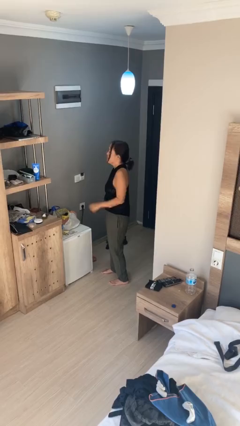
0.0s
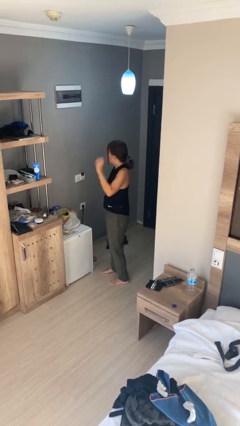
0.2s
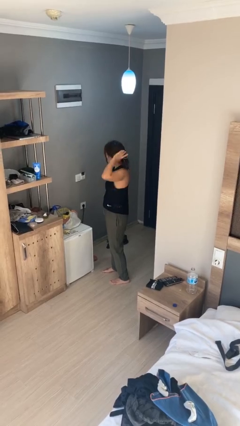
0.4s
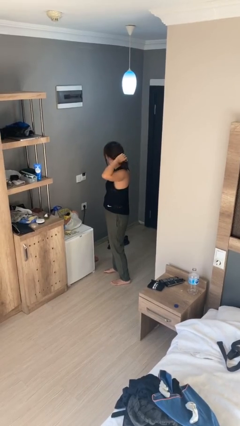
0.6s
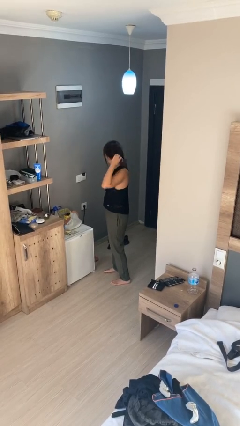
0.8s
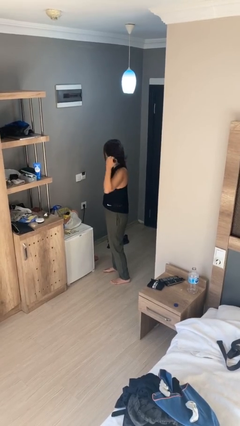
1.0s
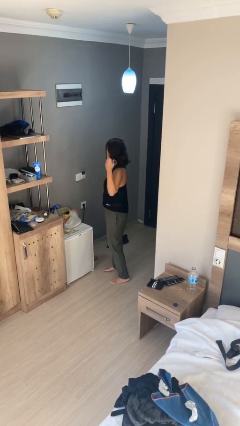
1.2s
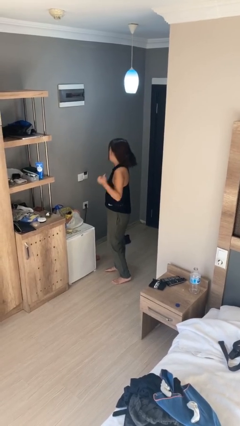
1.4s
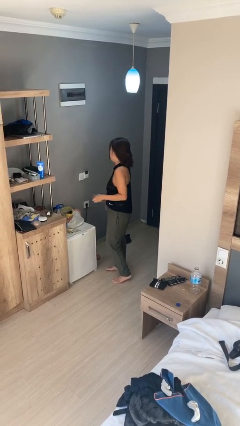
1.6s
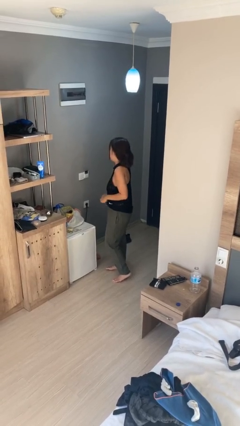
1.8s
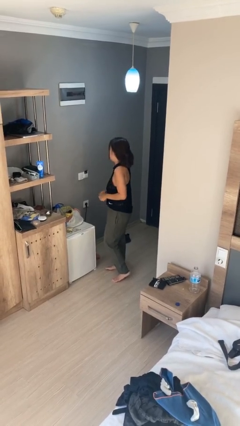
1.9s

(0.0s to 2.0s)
person takes off hairtie

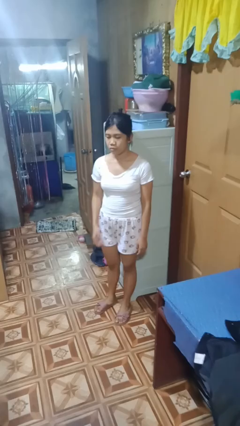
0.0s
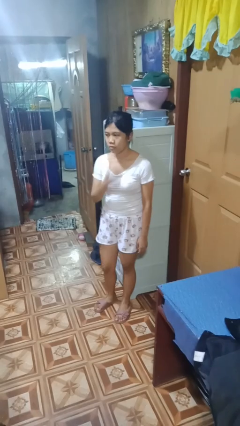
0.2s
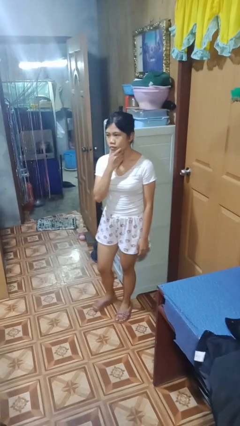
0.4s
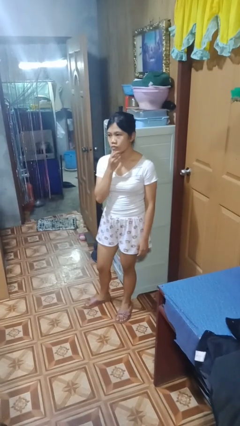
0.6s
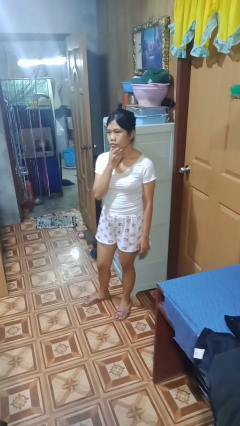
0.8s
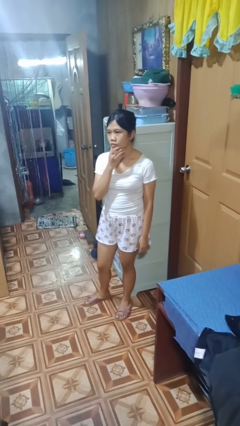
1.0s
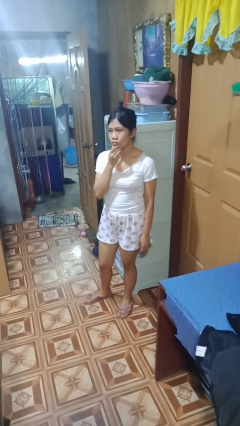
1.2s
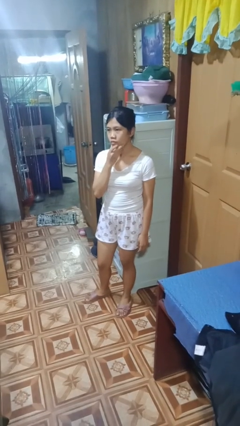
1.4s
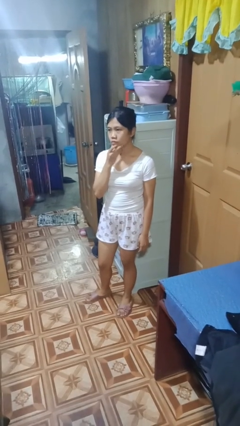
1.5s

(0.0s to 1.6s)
person strokes chin

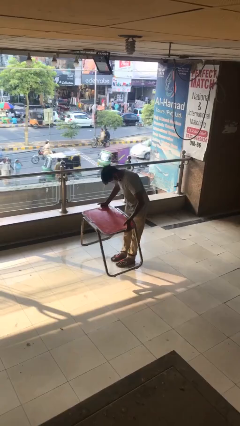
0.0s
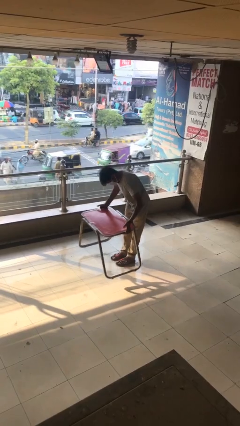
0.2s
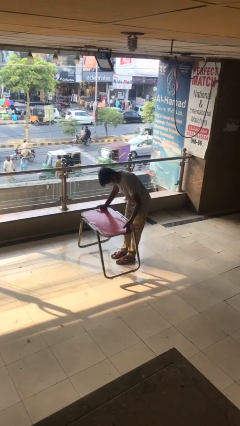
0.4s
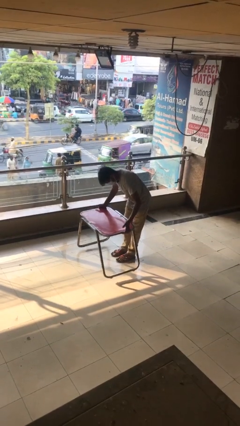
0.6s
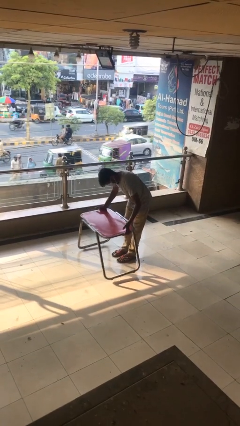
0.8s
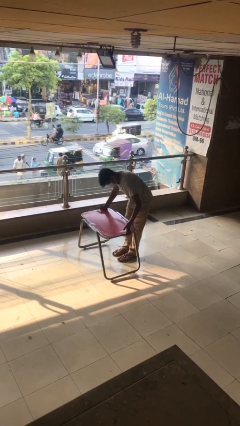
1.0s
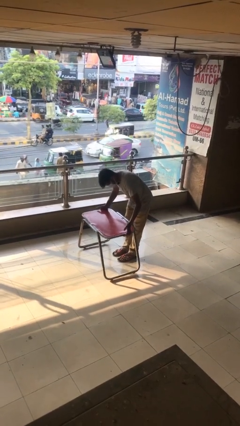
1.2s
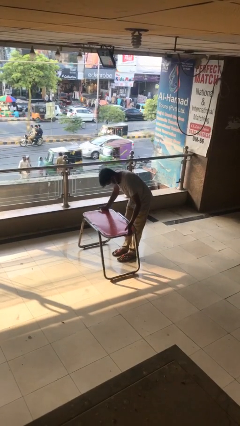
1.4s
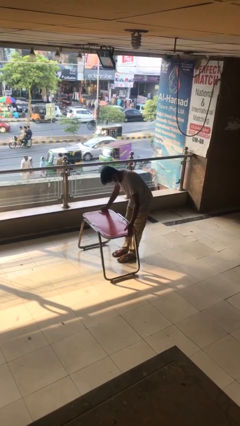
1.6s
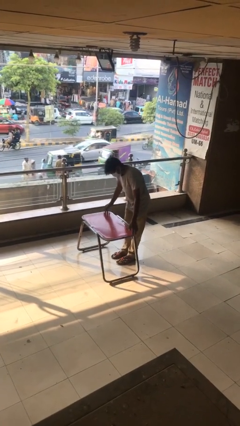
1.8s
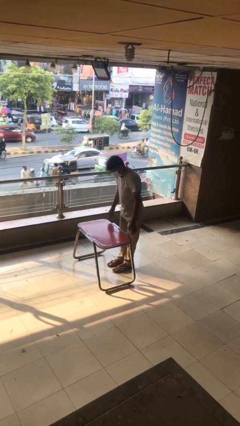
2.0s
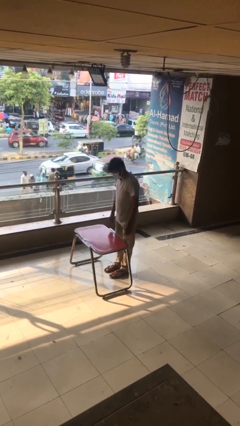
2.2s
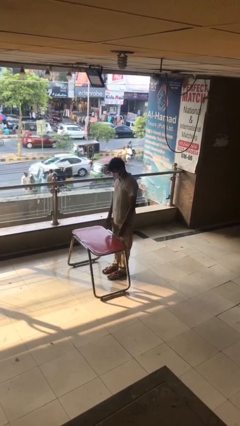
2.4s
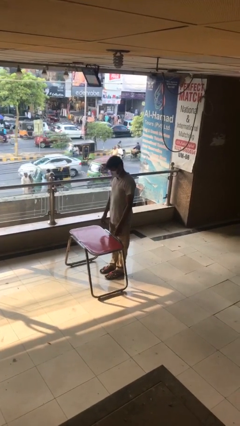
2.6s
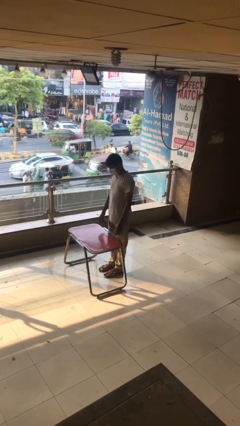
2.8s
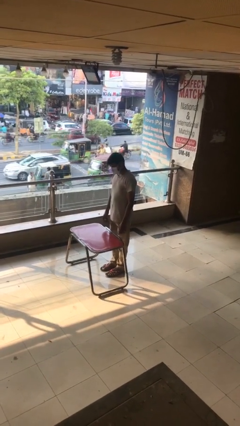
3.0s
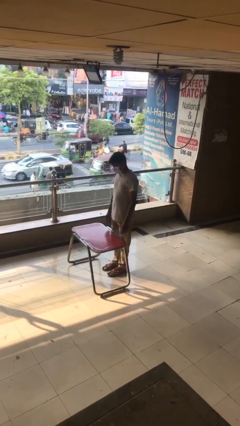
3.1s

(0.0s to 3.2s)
person puts down object on floor

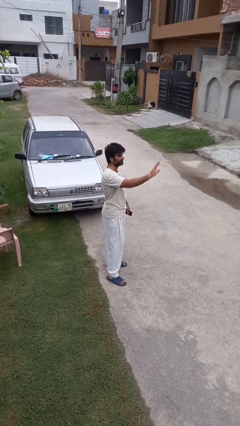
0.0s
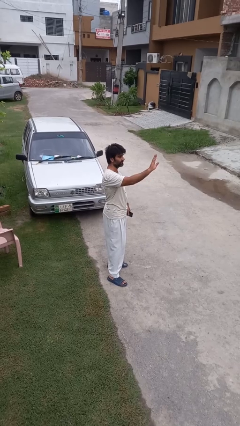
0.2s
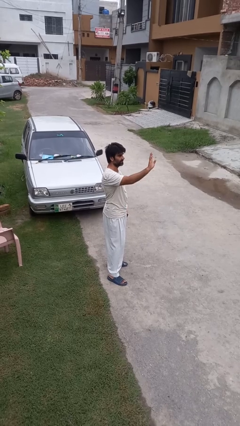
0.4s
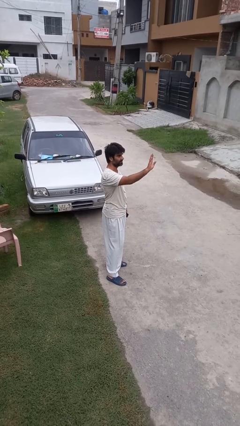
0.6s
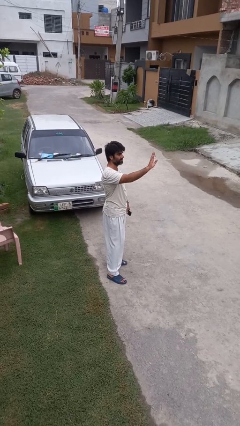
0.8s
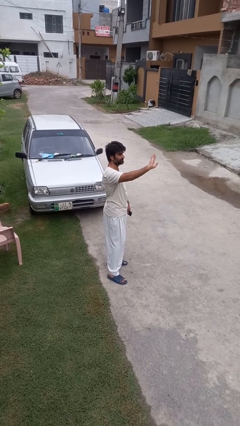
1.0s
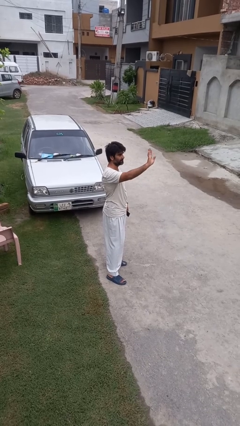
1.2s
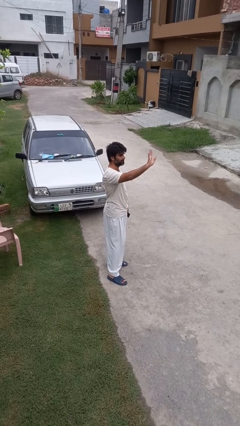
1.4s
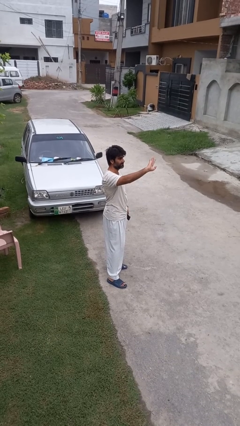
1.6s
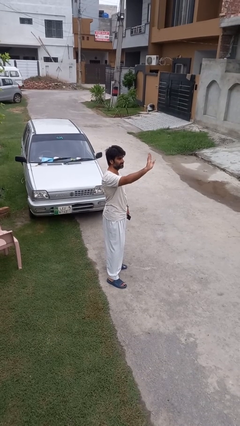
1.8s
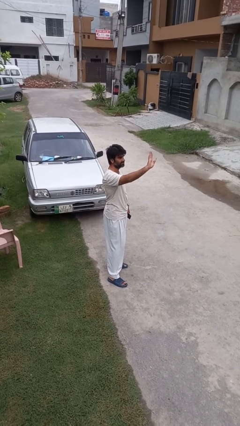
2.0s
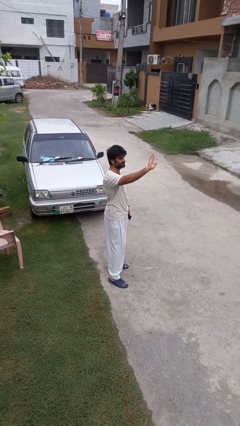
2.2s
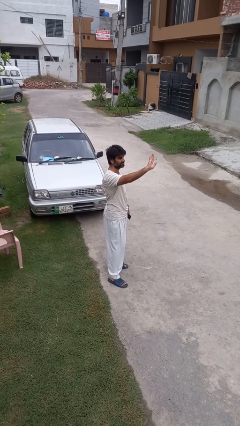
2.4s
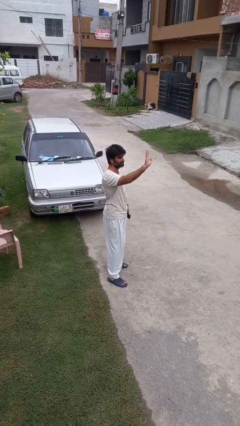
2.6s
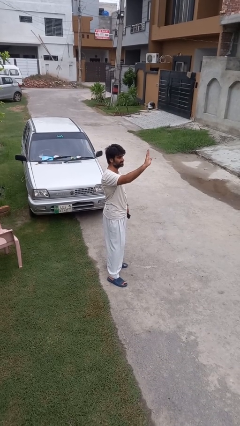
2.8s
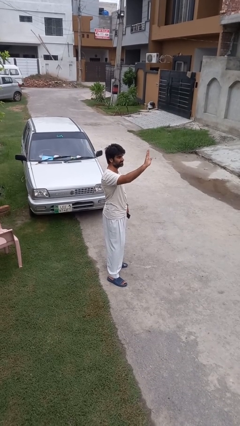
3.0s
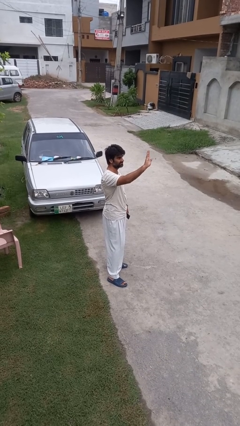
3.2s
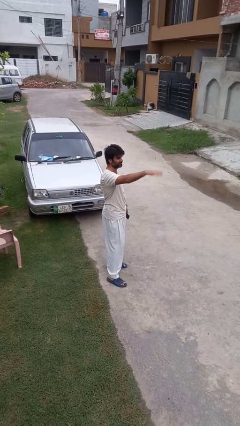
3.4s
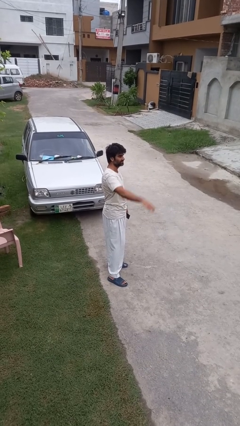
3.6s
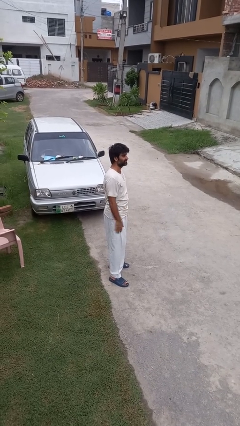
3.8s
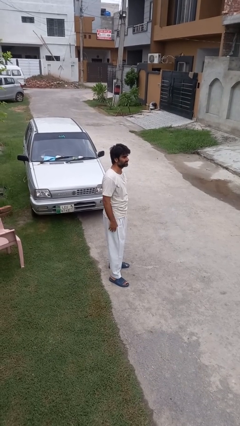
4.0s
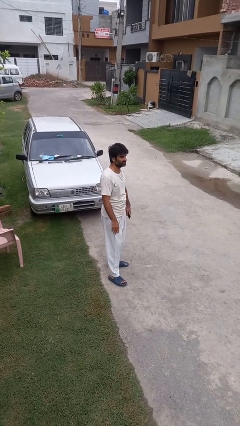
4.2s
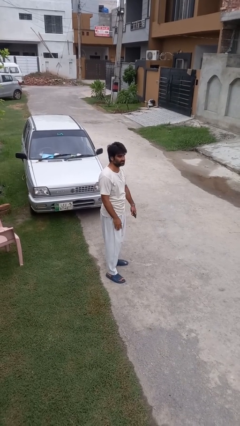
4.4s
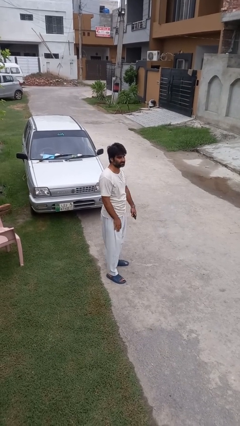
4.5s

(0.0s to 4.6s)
person waves at person

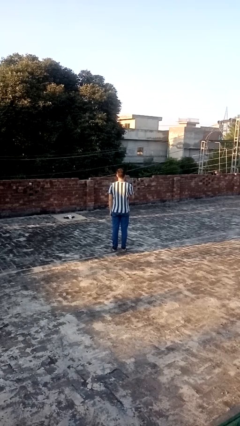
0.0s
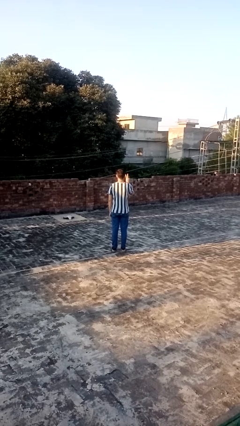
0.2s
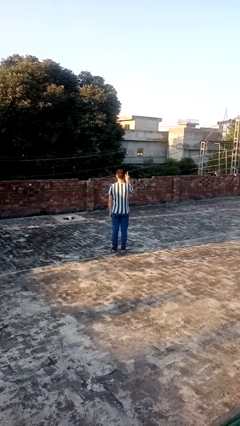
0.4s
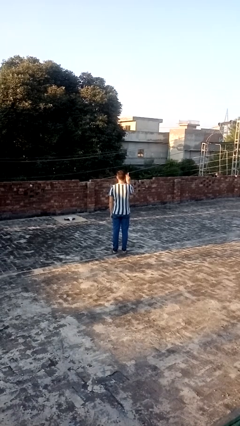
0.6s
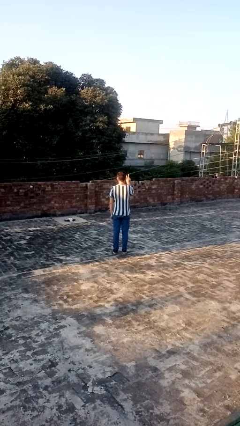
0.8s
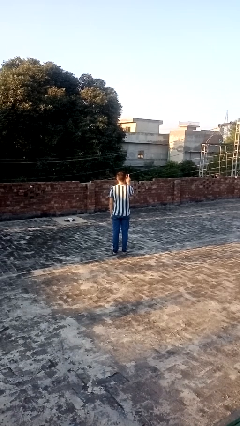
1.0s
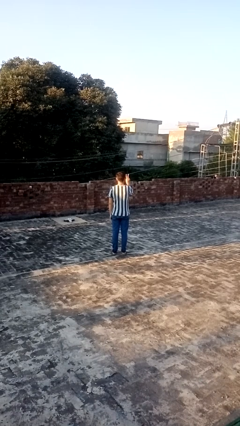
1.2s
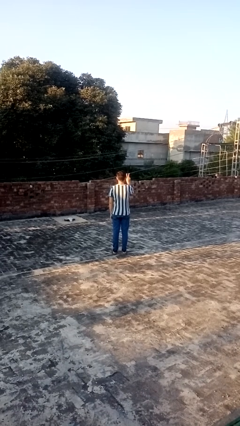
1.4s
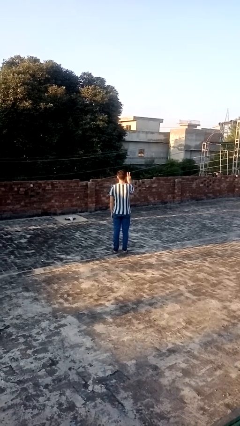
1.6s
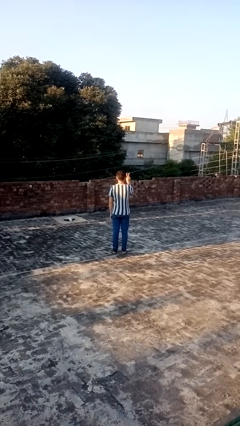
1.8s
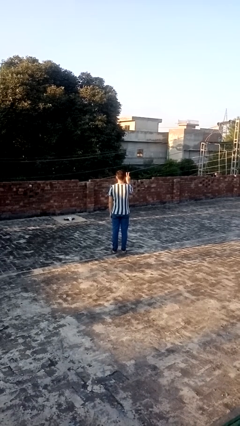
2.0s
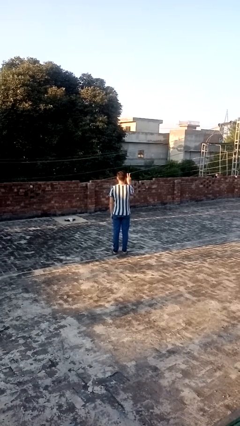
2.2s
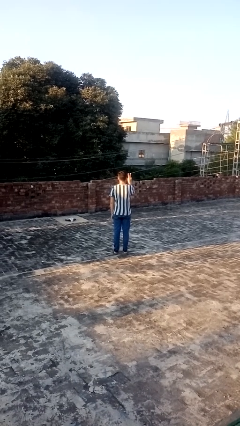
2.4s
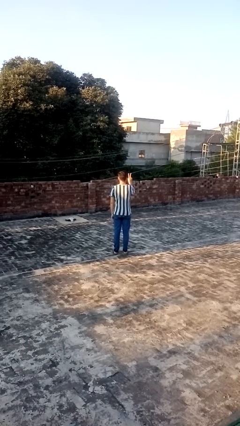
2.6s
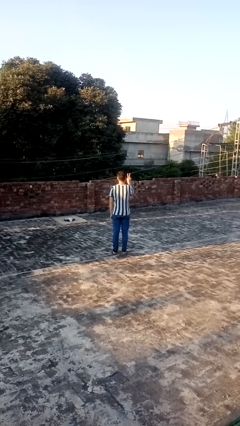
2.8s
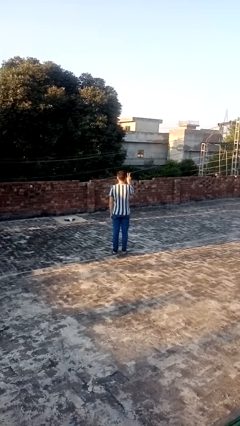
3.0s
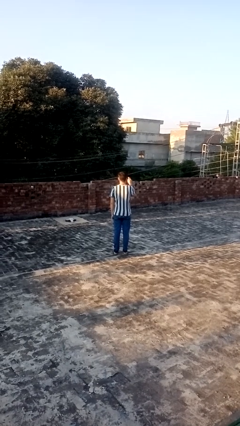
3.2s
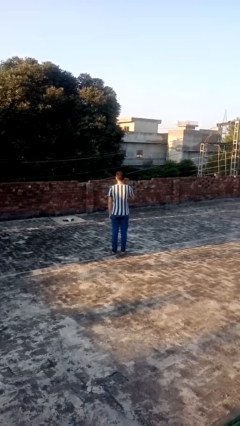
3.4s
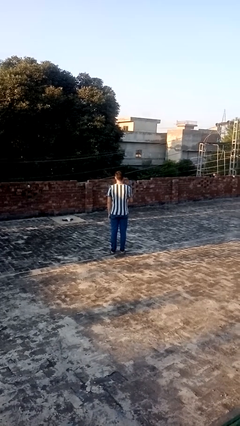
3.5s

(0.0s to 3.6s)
person gestures peace

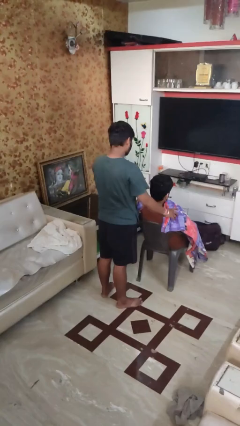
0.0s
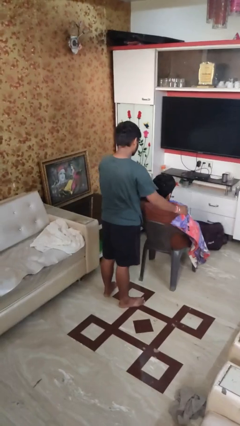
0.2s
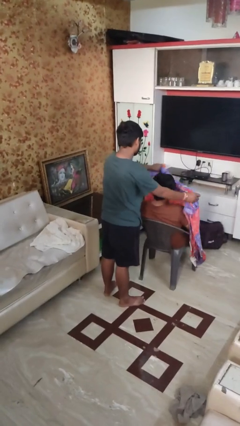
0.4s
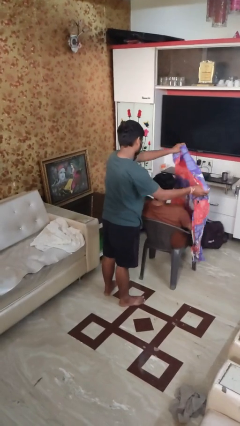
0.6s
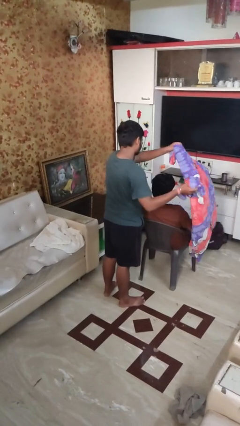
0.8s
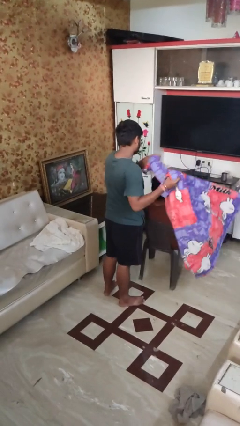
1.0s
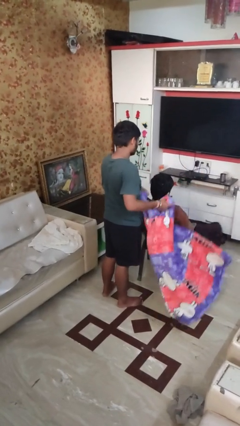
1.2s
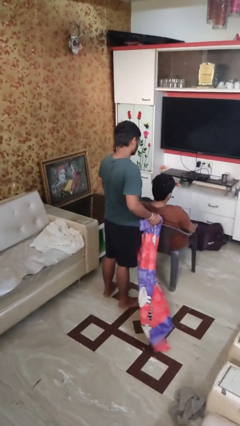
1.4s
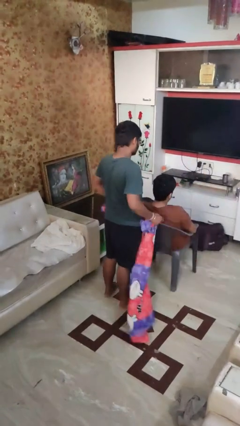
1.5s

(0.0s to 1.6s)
person uncovers friend with blanket

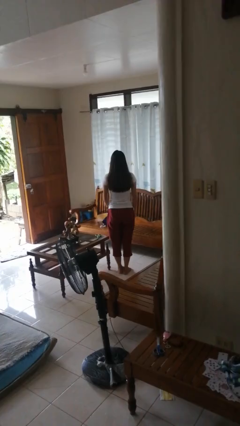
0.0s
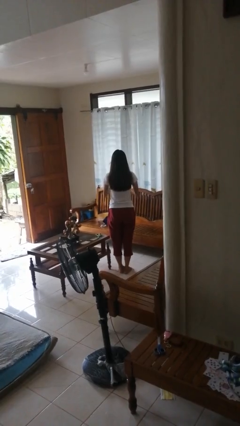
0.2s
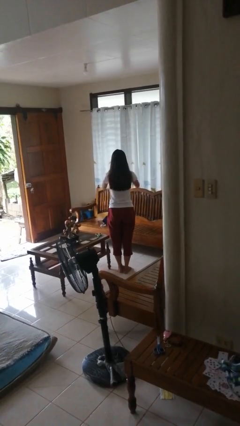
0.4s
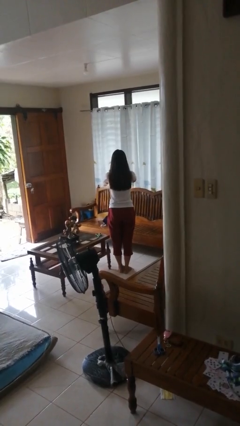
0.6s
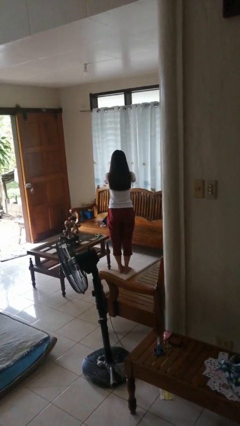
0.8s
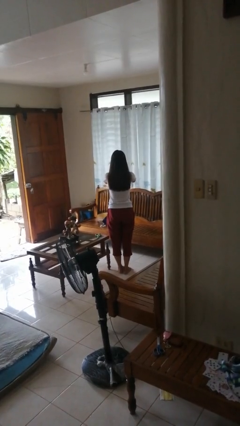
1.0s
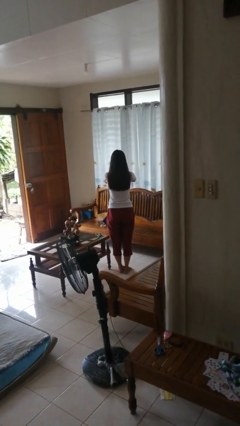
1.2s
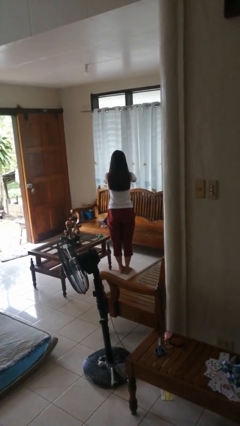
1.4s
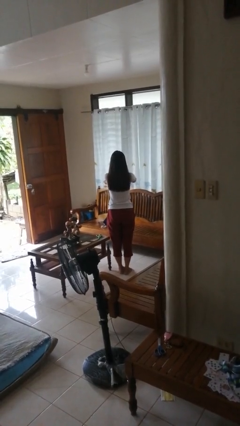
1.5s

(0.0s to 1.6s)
person covers face with hands
